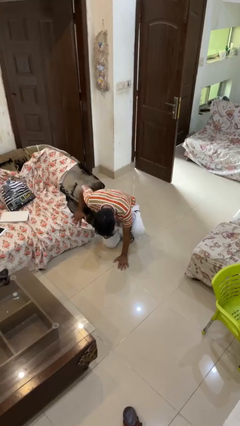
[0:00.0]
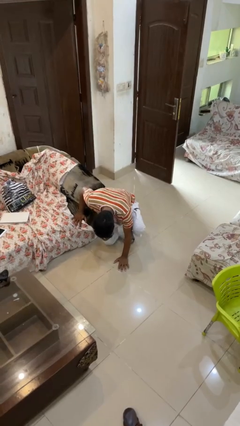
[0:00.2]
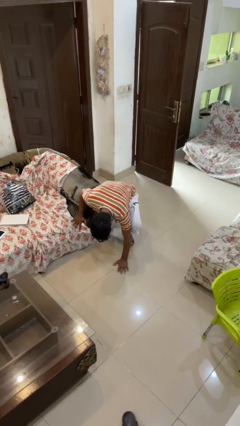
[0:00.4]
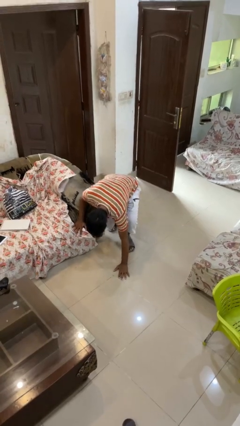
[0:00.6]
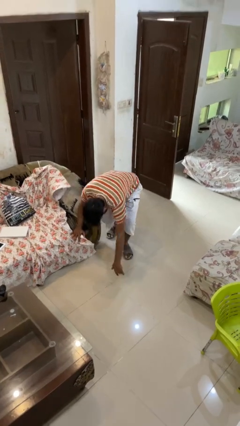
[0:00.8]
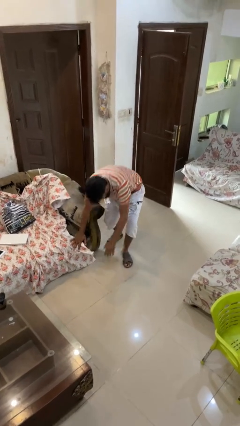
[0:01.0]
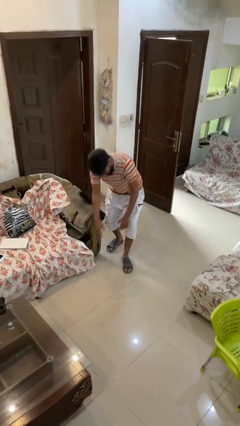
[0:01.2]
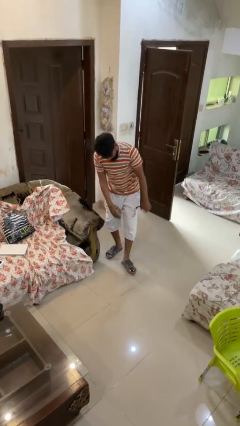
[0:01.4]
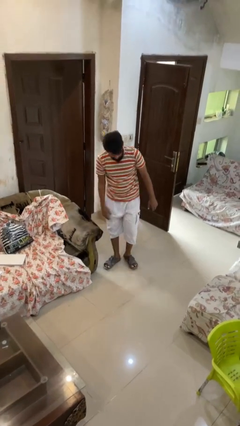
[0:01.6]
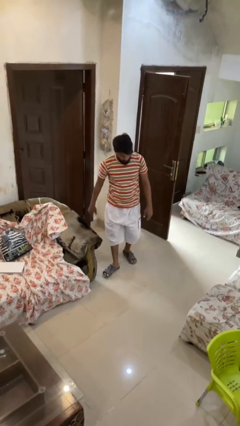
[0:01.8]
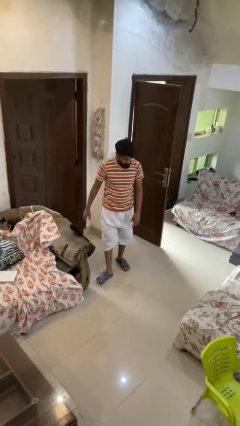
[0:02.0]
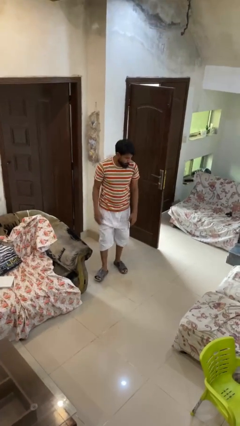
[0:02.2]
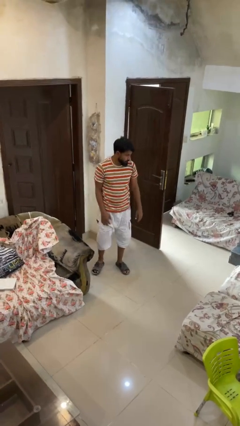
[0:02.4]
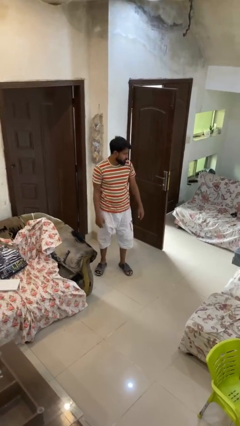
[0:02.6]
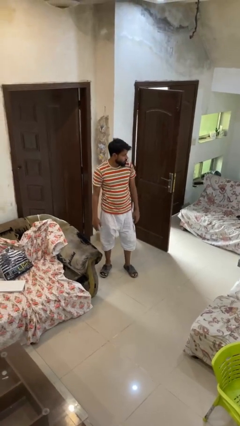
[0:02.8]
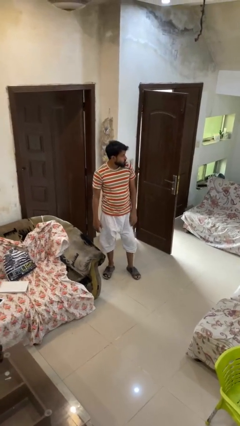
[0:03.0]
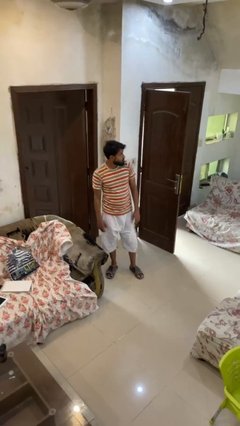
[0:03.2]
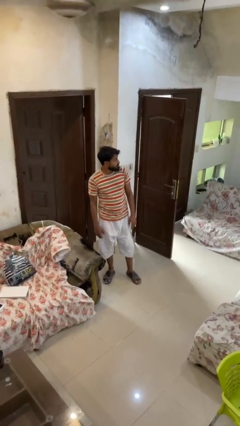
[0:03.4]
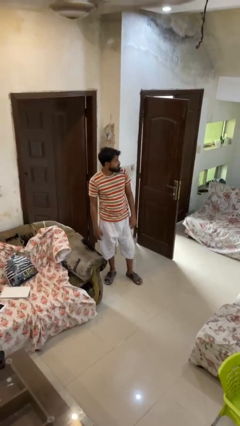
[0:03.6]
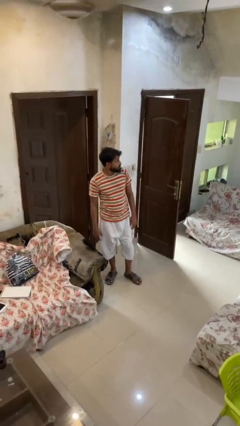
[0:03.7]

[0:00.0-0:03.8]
person stands up from floor

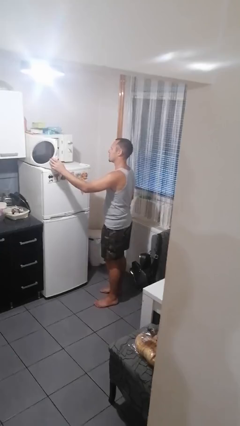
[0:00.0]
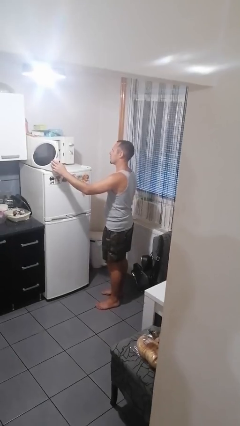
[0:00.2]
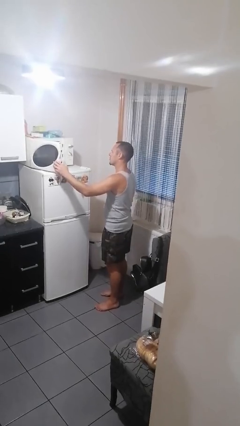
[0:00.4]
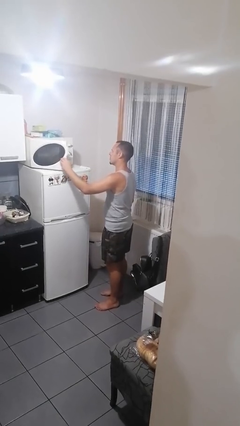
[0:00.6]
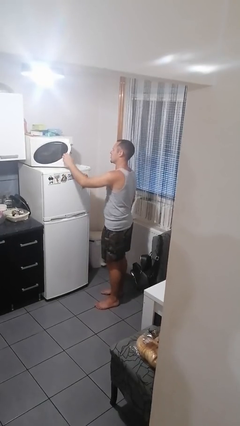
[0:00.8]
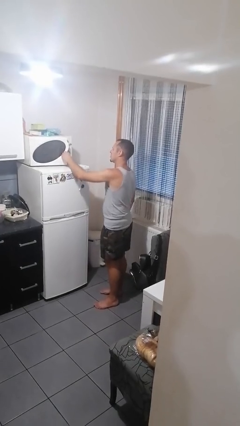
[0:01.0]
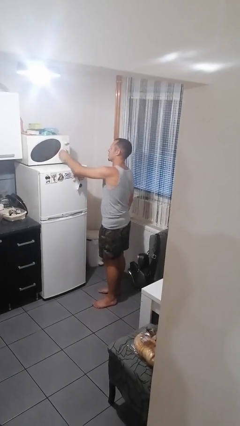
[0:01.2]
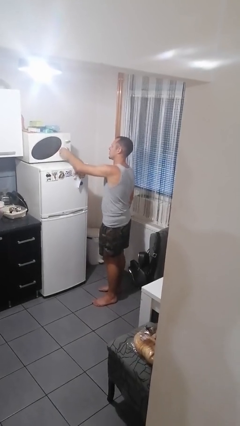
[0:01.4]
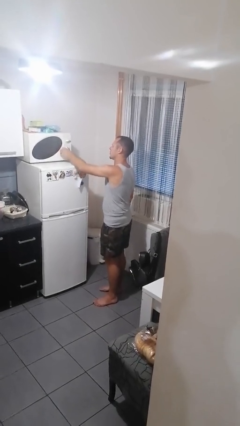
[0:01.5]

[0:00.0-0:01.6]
person closes microwave

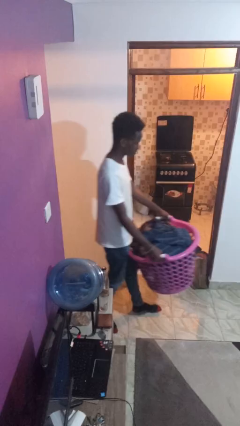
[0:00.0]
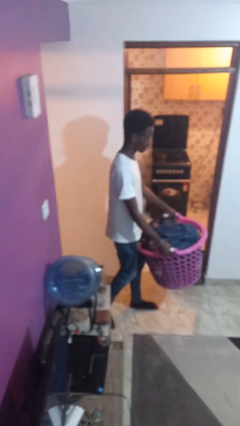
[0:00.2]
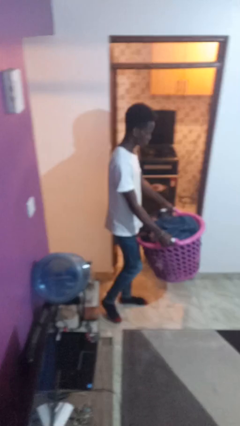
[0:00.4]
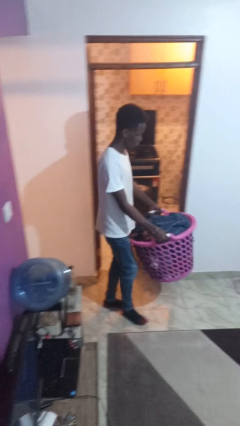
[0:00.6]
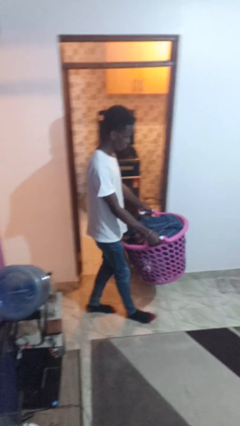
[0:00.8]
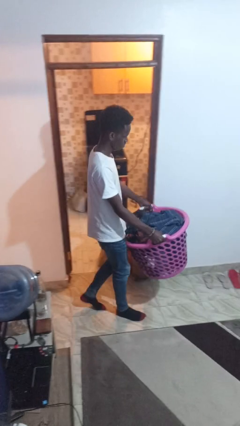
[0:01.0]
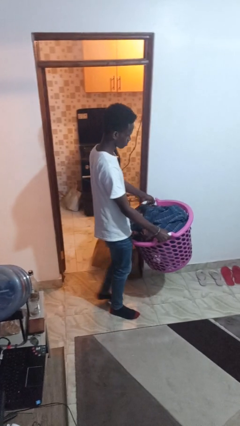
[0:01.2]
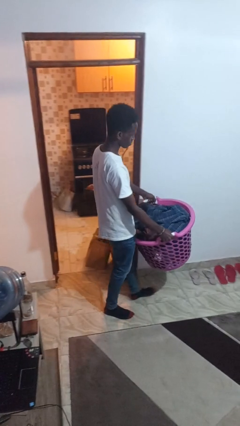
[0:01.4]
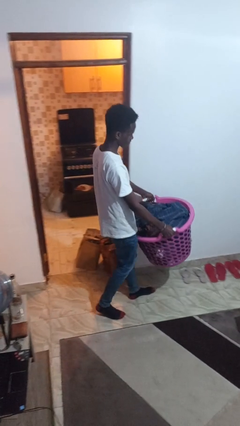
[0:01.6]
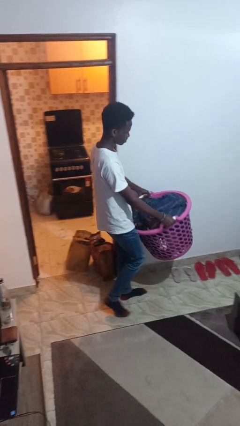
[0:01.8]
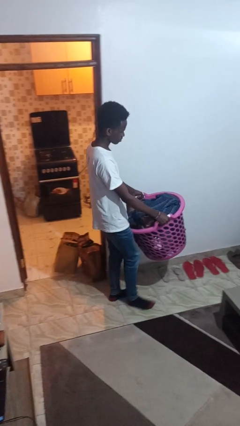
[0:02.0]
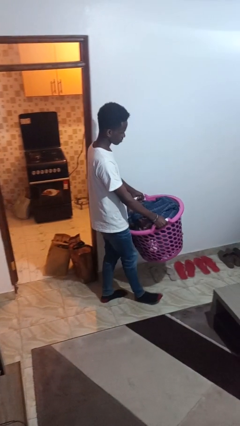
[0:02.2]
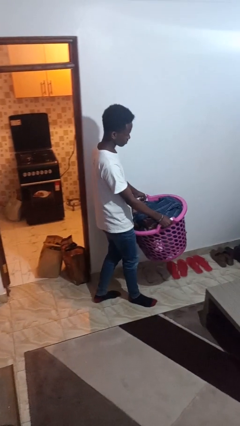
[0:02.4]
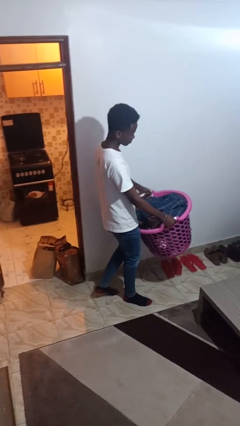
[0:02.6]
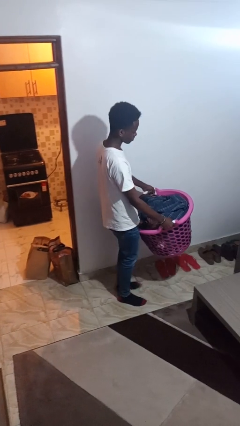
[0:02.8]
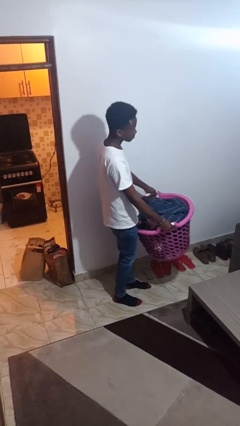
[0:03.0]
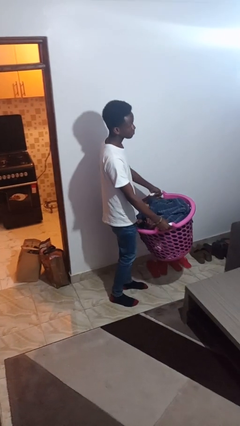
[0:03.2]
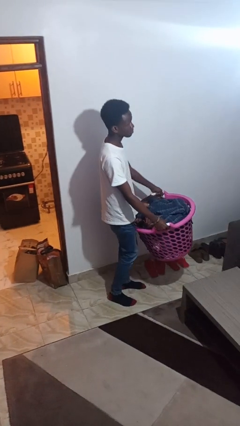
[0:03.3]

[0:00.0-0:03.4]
person carries laundry basket

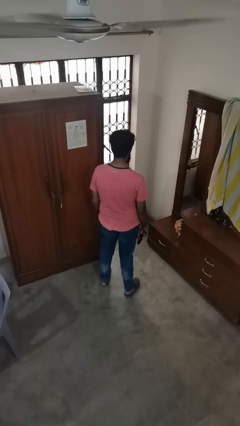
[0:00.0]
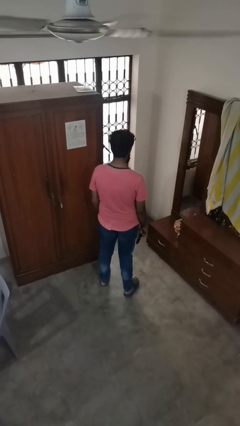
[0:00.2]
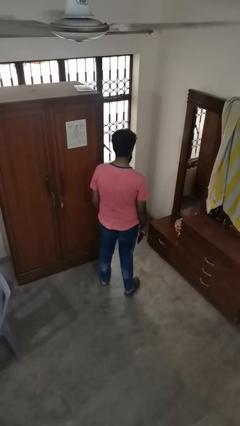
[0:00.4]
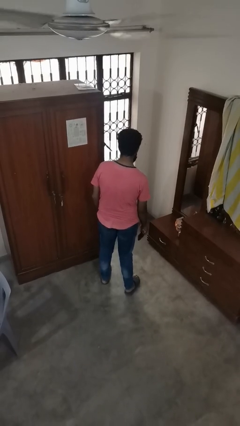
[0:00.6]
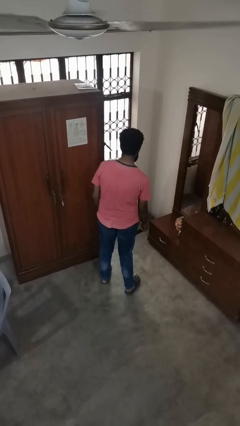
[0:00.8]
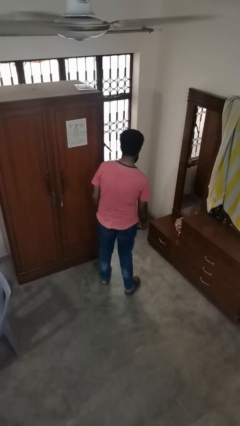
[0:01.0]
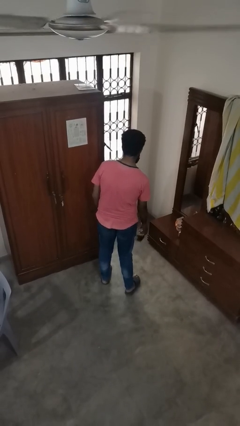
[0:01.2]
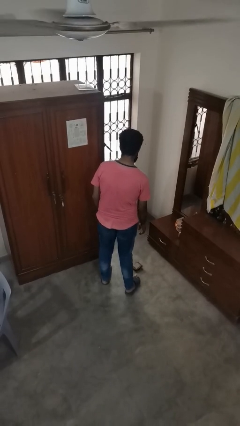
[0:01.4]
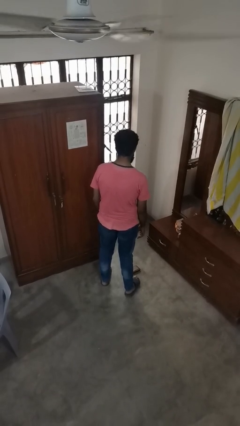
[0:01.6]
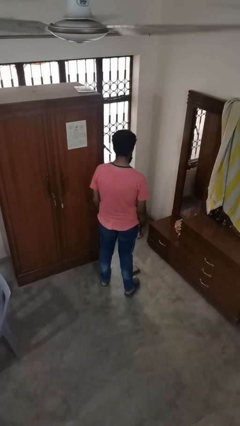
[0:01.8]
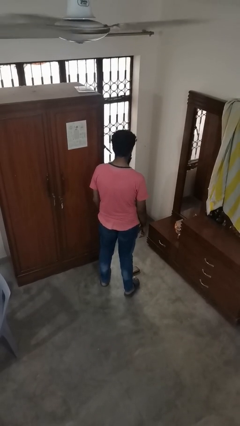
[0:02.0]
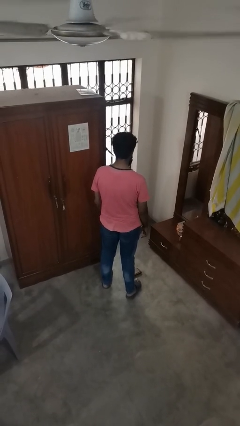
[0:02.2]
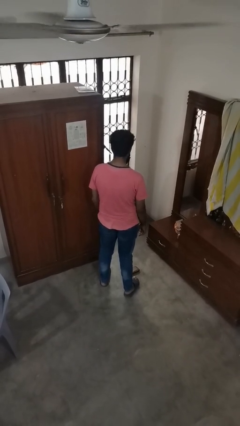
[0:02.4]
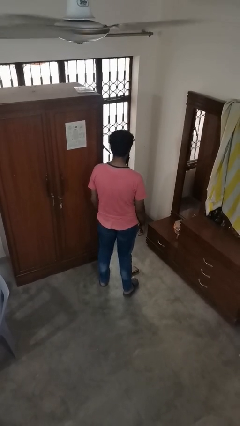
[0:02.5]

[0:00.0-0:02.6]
person throws object to ground

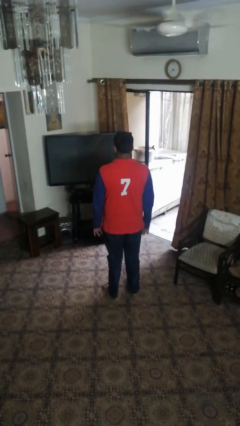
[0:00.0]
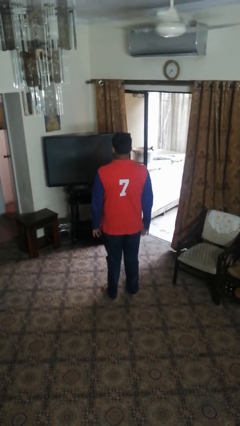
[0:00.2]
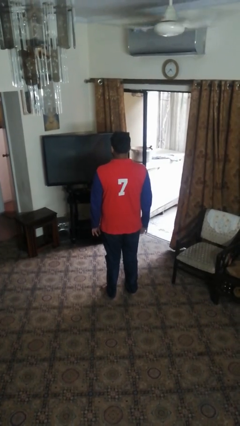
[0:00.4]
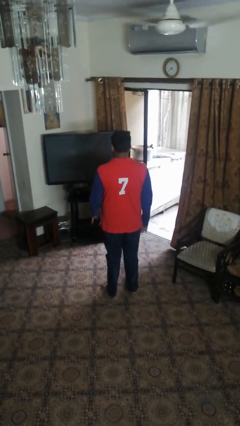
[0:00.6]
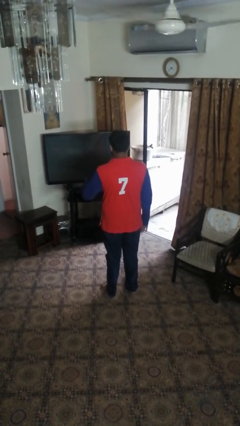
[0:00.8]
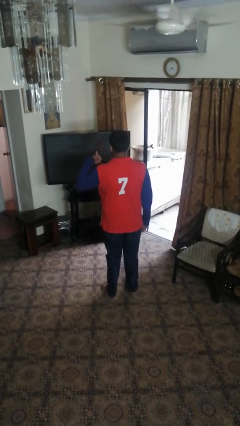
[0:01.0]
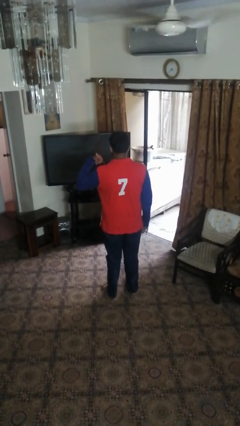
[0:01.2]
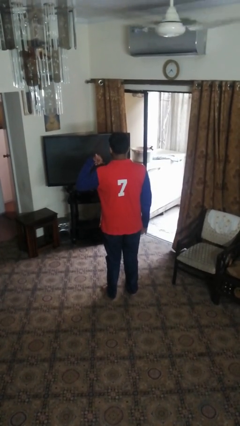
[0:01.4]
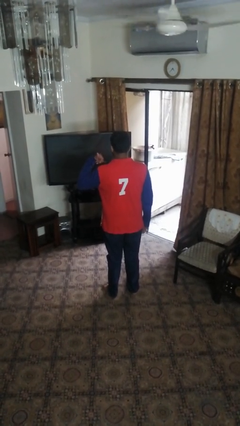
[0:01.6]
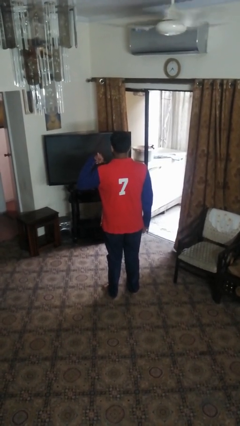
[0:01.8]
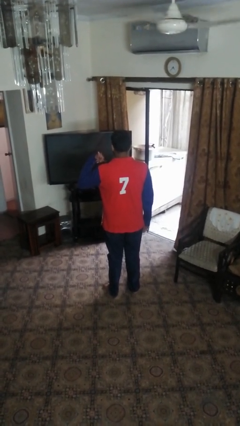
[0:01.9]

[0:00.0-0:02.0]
person gestures hang loose

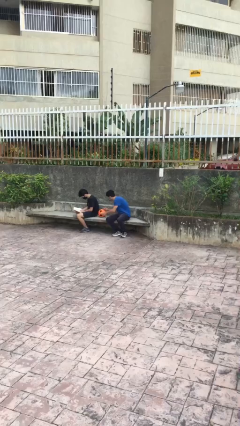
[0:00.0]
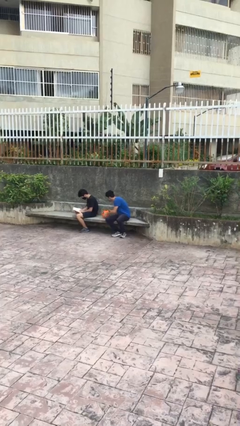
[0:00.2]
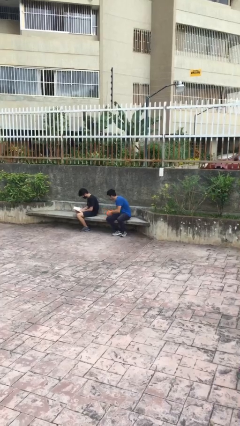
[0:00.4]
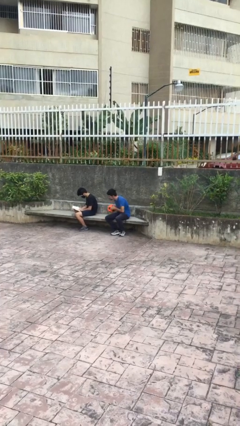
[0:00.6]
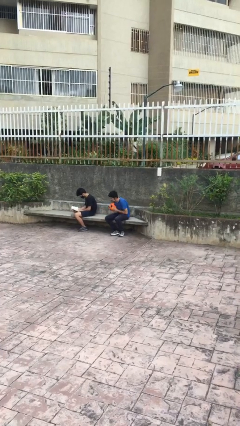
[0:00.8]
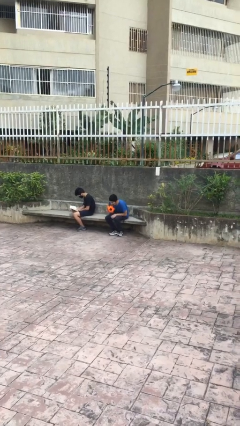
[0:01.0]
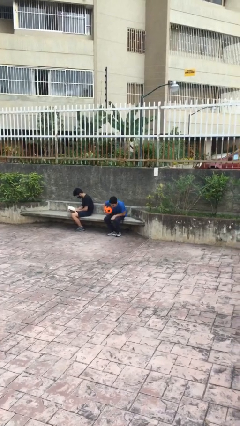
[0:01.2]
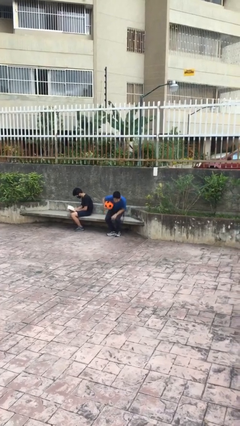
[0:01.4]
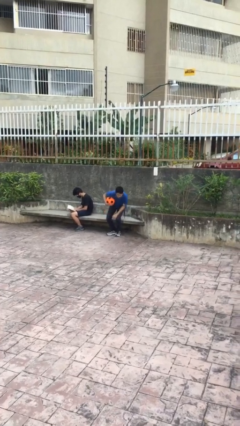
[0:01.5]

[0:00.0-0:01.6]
person steals object from person

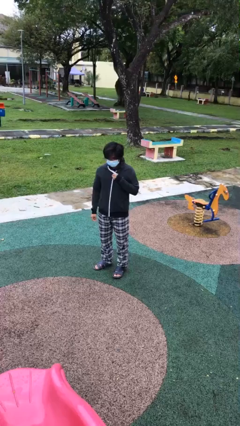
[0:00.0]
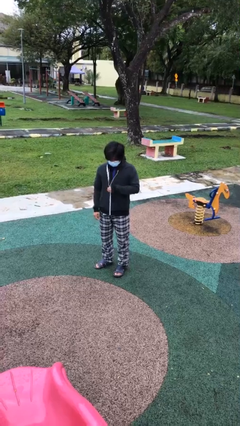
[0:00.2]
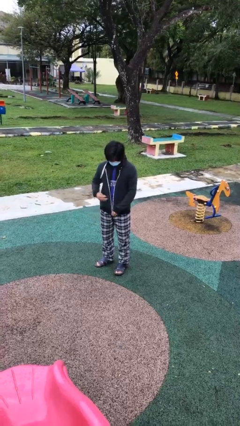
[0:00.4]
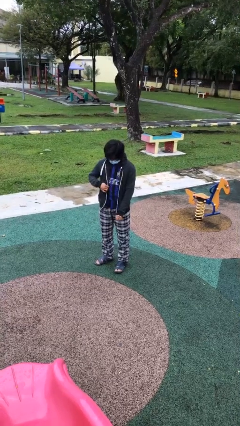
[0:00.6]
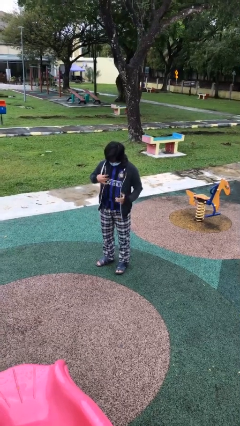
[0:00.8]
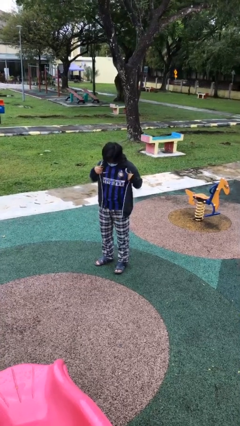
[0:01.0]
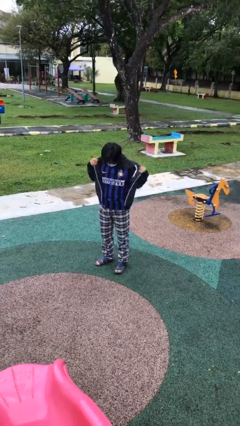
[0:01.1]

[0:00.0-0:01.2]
person unzips jacket

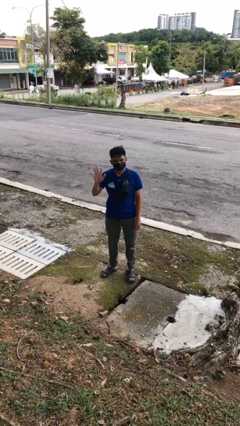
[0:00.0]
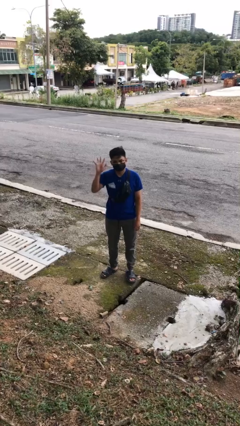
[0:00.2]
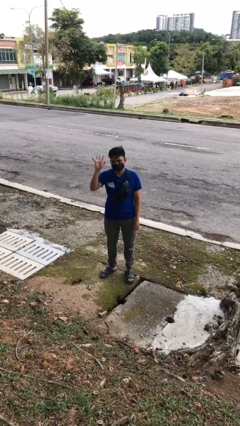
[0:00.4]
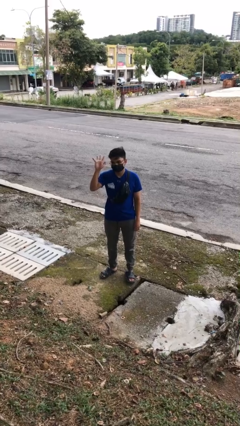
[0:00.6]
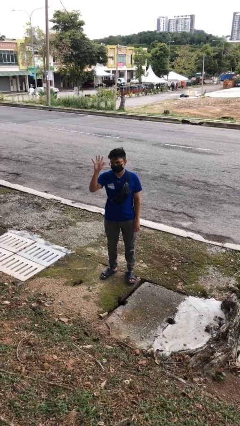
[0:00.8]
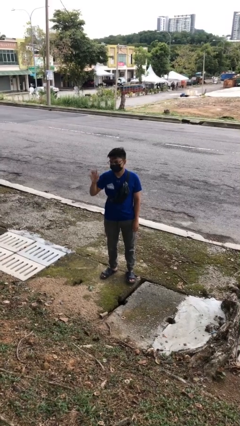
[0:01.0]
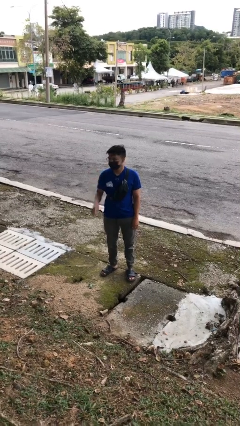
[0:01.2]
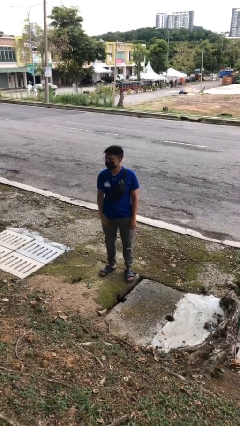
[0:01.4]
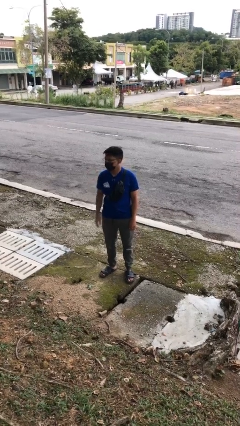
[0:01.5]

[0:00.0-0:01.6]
person gestures number five
